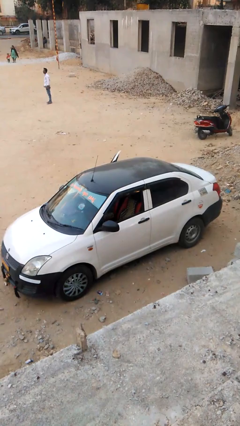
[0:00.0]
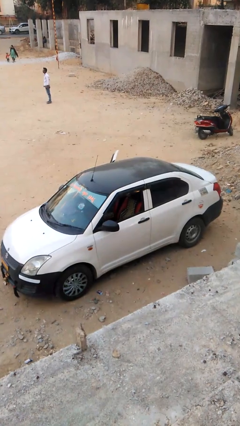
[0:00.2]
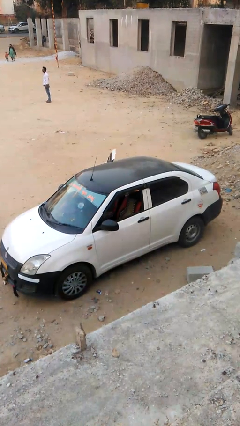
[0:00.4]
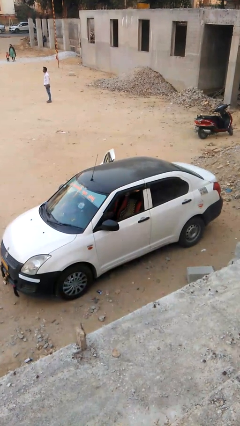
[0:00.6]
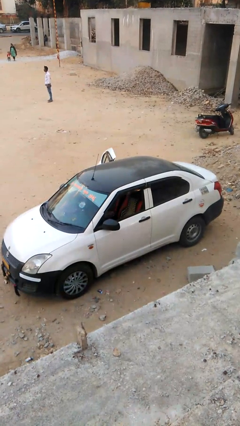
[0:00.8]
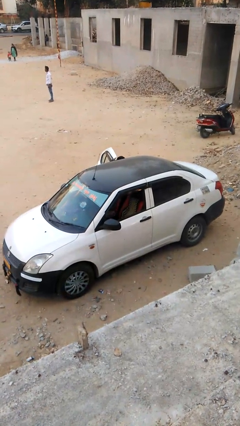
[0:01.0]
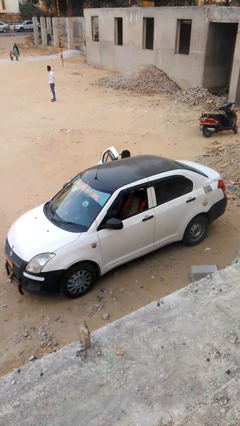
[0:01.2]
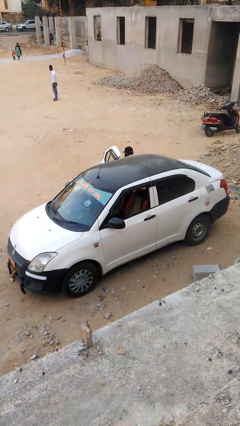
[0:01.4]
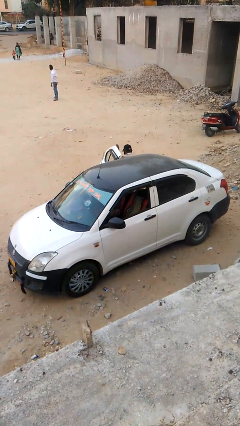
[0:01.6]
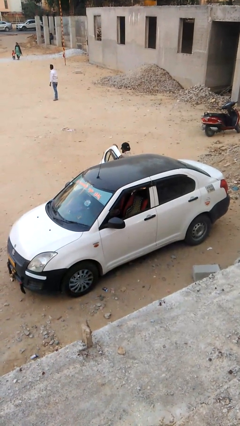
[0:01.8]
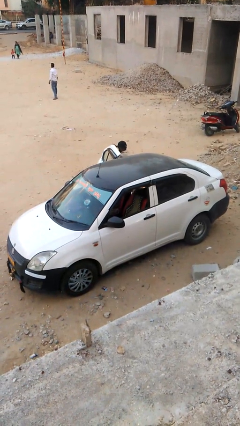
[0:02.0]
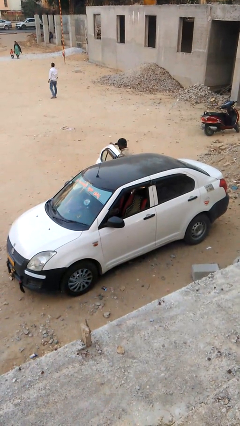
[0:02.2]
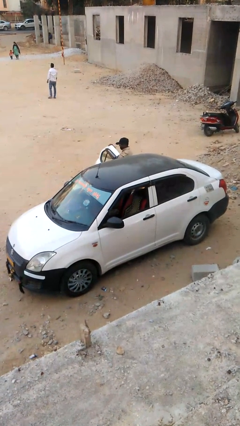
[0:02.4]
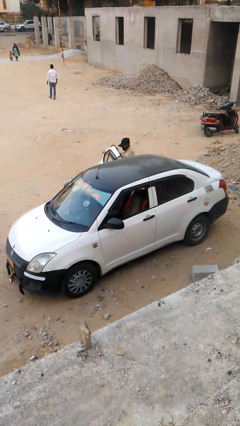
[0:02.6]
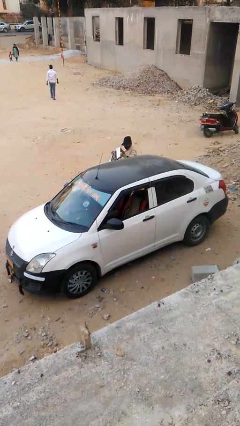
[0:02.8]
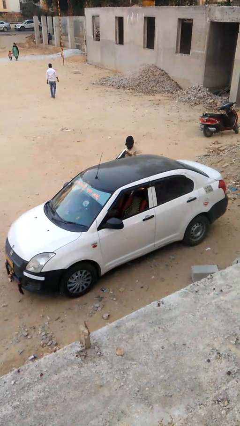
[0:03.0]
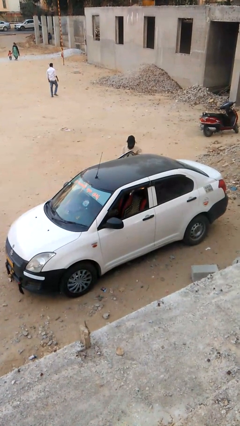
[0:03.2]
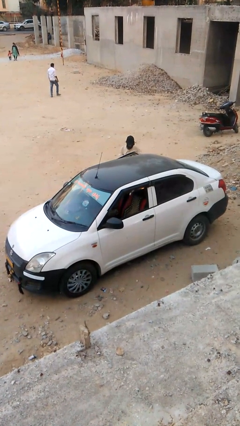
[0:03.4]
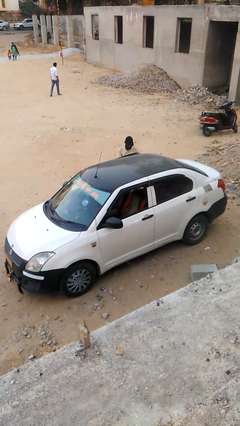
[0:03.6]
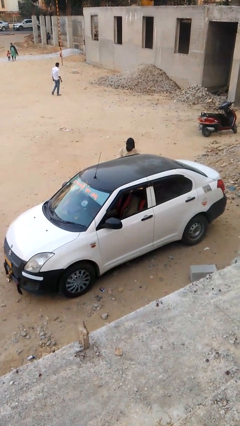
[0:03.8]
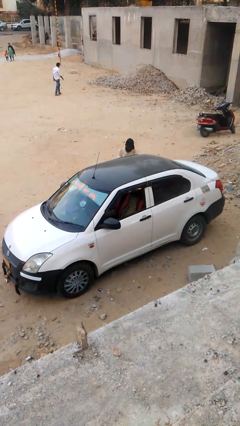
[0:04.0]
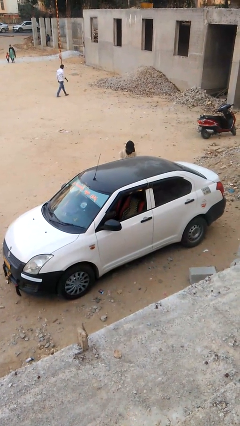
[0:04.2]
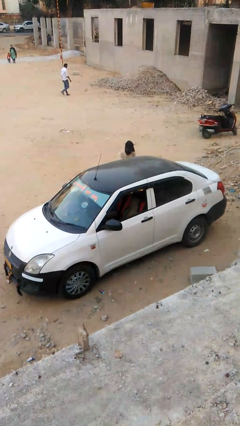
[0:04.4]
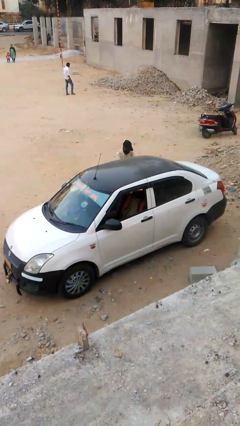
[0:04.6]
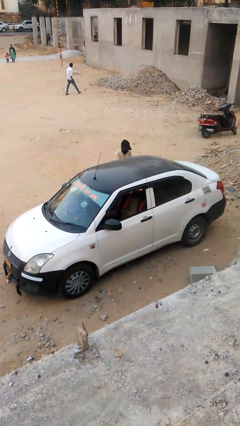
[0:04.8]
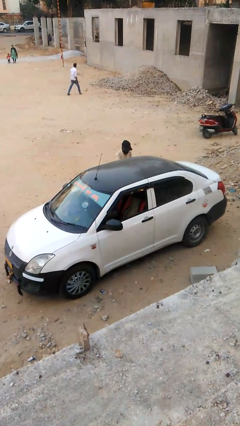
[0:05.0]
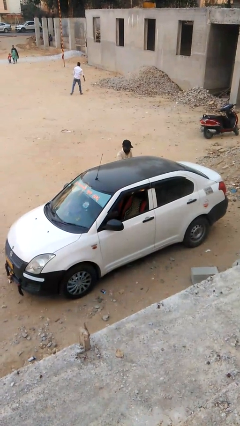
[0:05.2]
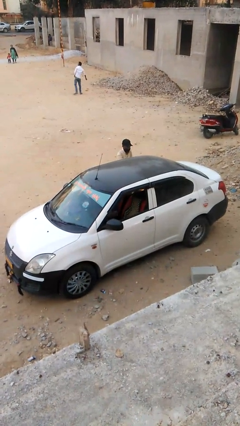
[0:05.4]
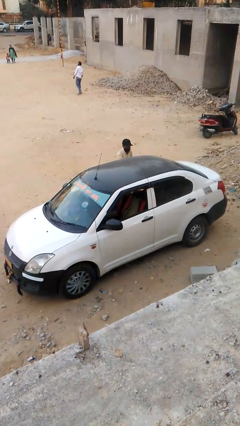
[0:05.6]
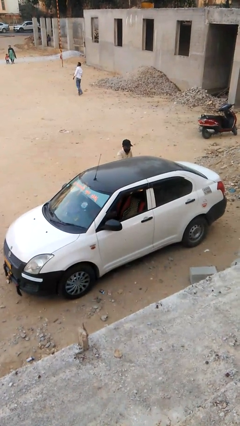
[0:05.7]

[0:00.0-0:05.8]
car drops off person

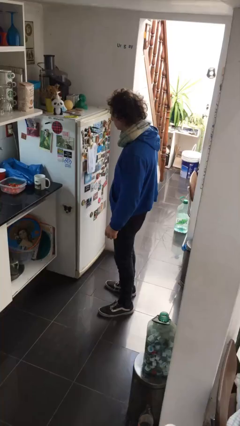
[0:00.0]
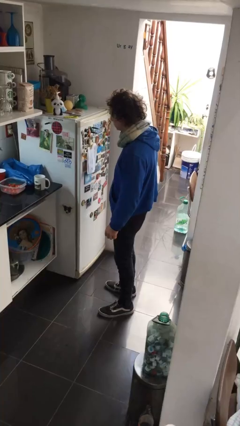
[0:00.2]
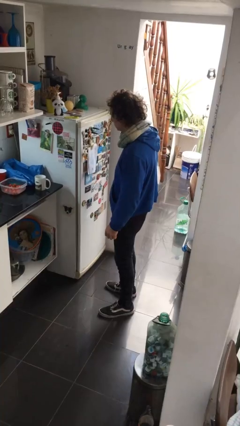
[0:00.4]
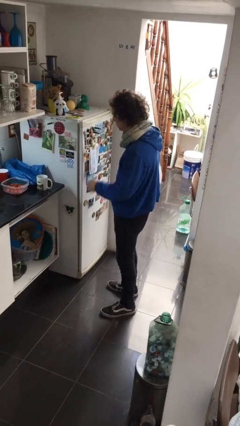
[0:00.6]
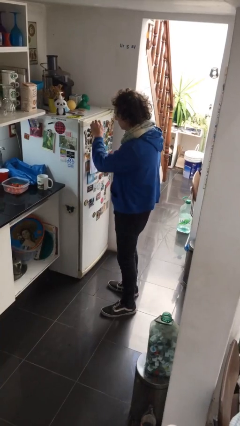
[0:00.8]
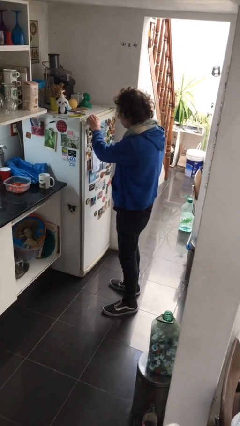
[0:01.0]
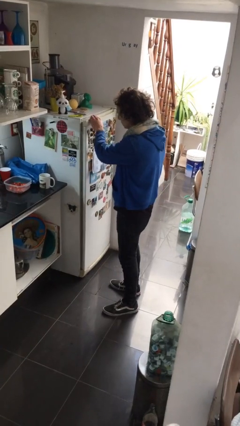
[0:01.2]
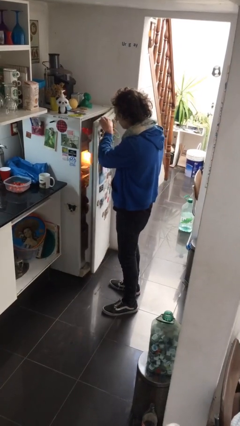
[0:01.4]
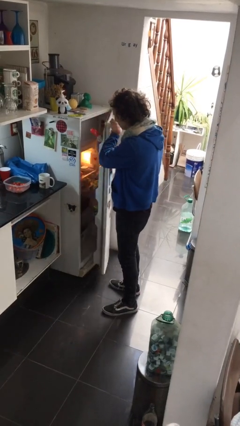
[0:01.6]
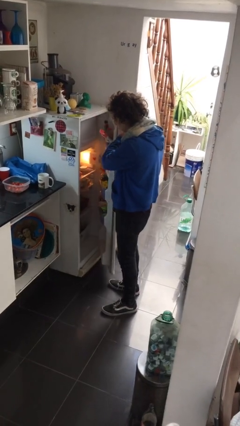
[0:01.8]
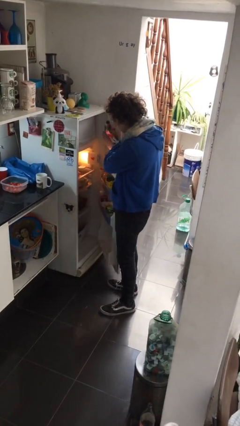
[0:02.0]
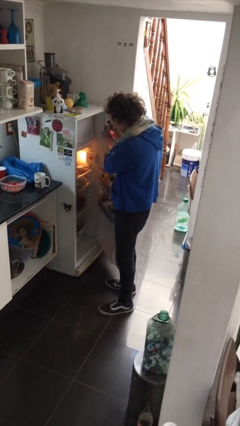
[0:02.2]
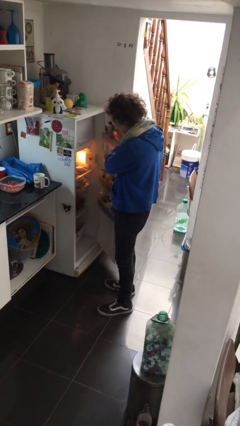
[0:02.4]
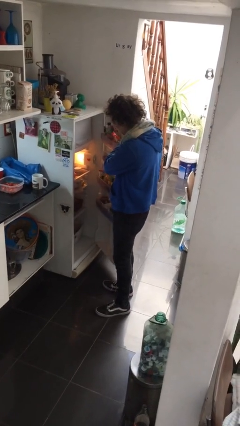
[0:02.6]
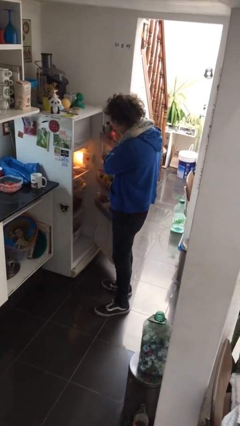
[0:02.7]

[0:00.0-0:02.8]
person opens refrigerator

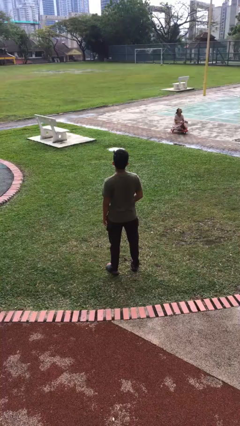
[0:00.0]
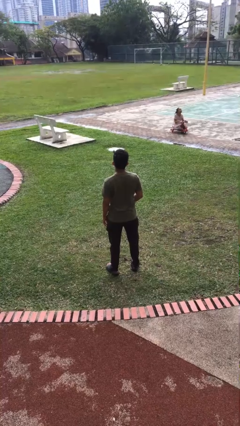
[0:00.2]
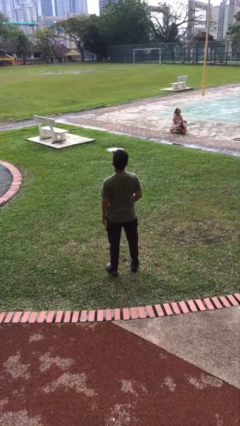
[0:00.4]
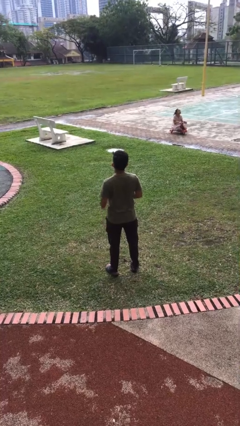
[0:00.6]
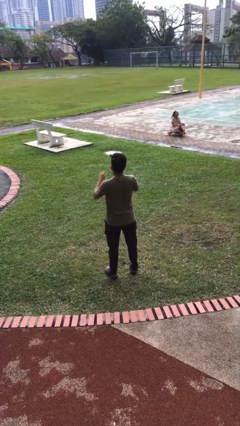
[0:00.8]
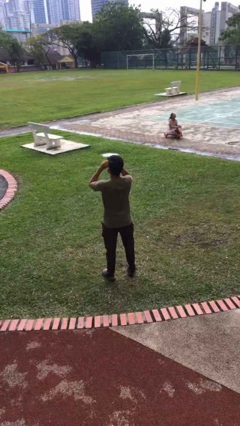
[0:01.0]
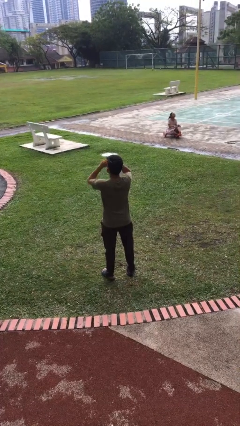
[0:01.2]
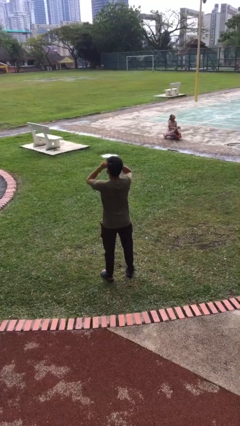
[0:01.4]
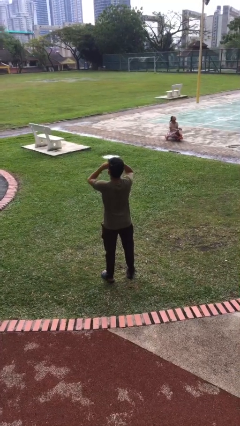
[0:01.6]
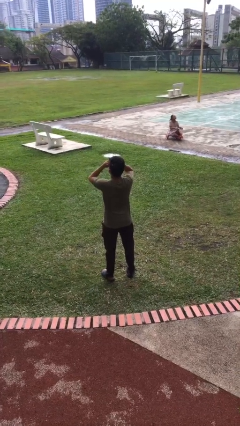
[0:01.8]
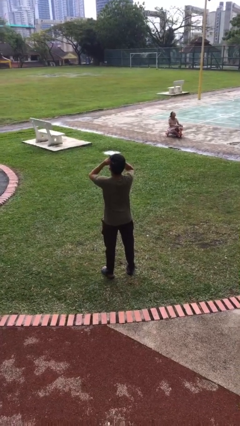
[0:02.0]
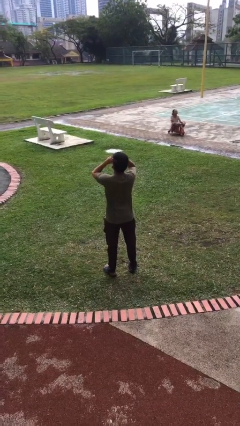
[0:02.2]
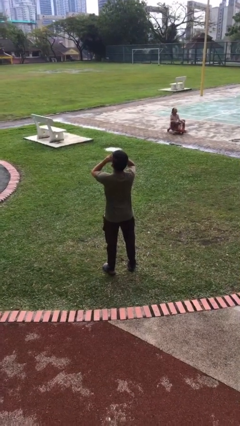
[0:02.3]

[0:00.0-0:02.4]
person rubs eyes

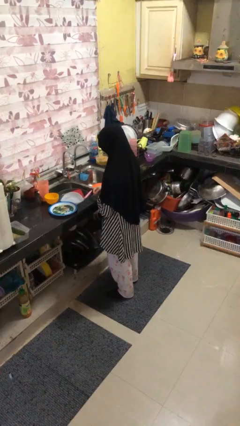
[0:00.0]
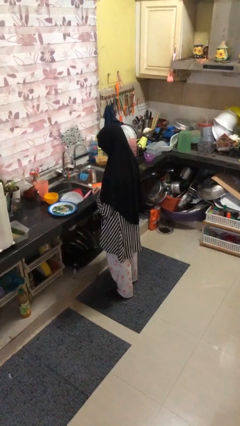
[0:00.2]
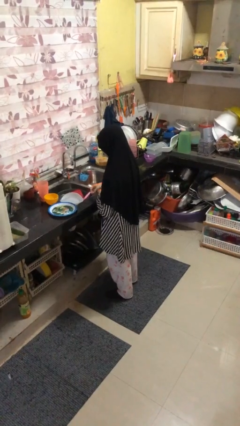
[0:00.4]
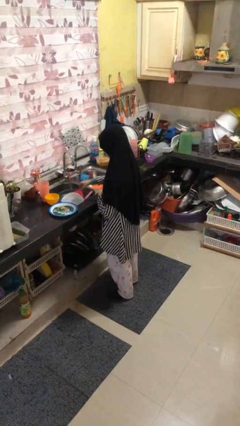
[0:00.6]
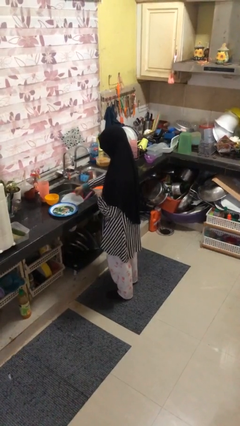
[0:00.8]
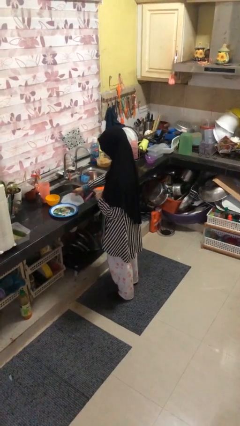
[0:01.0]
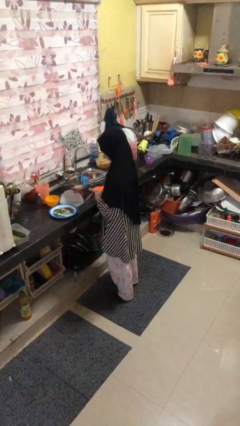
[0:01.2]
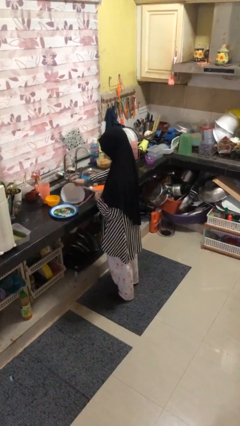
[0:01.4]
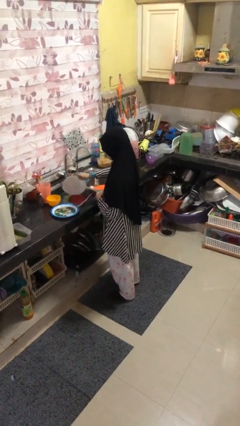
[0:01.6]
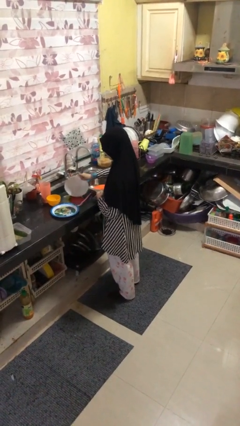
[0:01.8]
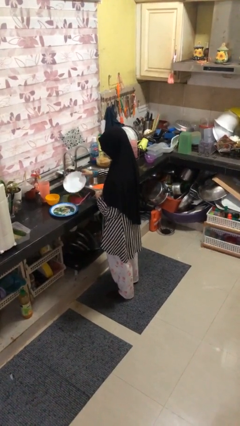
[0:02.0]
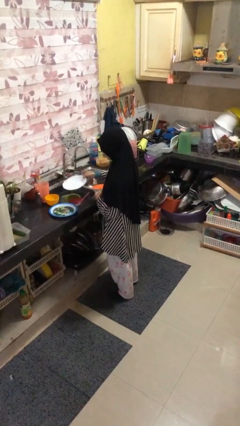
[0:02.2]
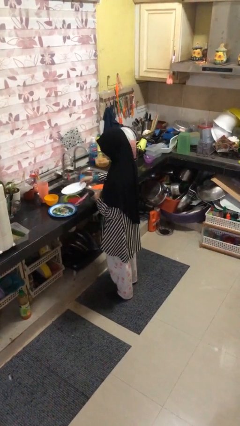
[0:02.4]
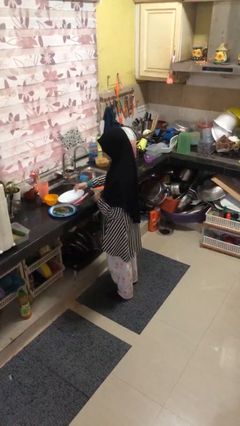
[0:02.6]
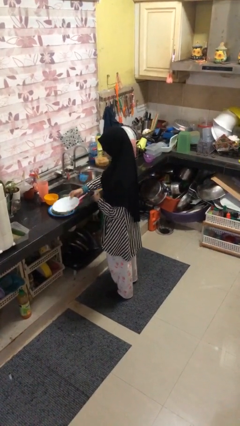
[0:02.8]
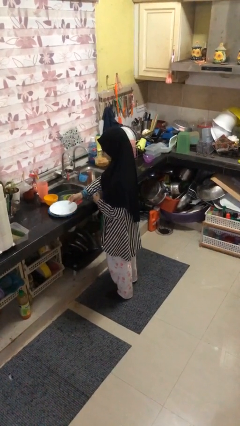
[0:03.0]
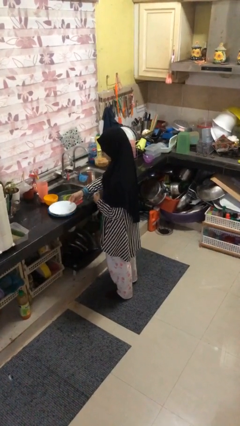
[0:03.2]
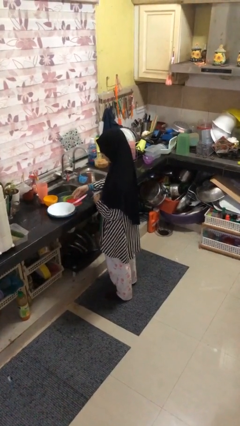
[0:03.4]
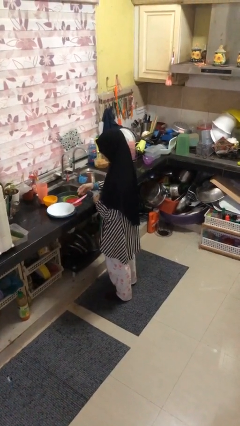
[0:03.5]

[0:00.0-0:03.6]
person unloads dishwasher

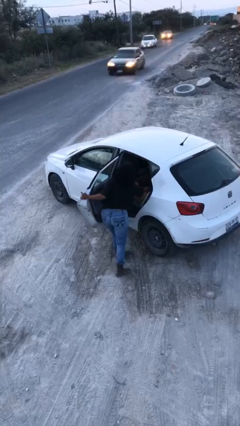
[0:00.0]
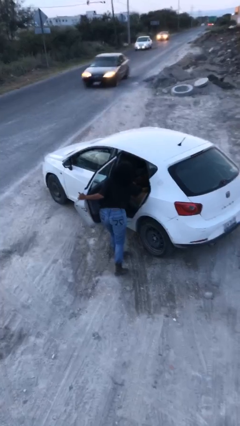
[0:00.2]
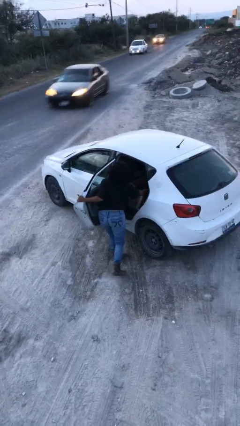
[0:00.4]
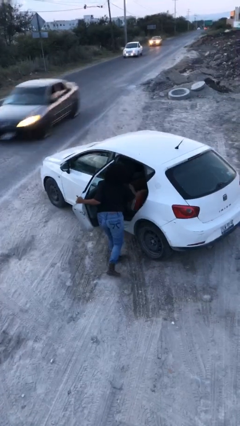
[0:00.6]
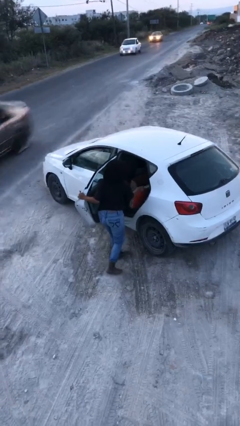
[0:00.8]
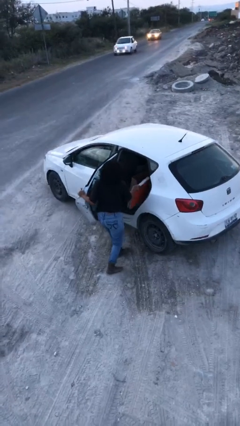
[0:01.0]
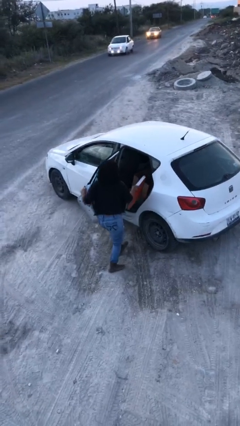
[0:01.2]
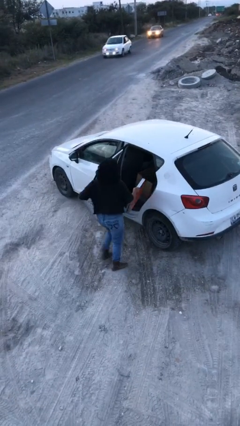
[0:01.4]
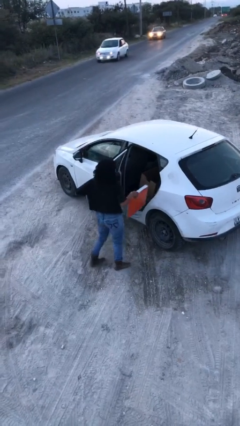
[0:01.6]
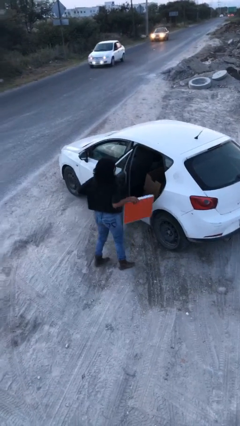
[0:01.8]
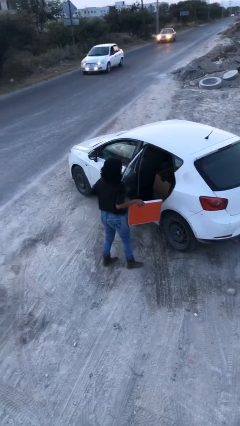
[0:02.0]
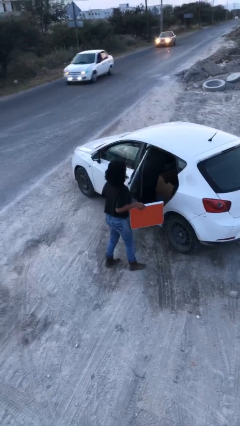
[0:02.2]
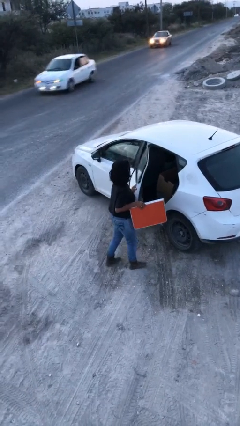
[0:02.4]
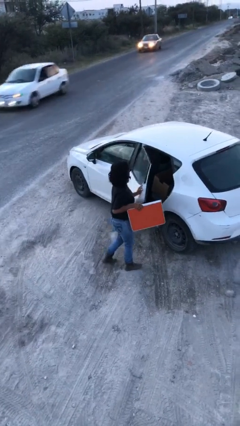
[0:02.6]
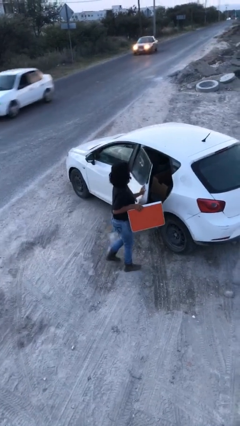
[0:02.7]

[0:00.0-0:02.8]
person unloads car
